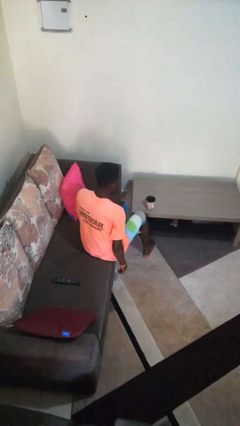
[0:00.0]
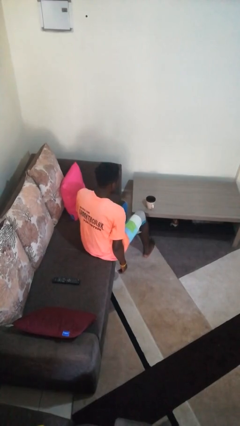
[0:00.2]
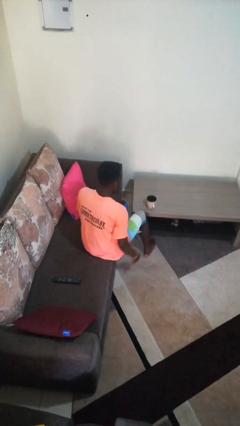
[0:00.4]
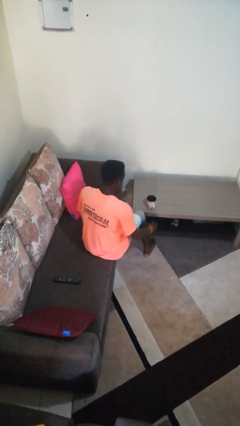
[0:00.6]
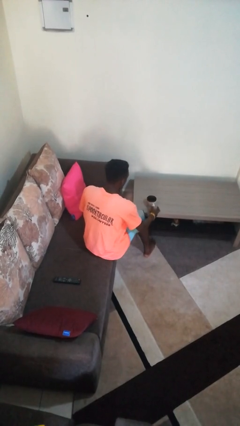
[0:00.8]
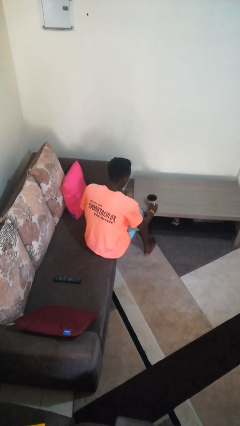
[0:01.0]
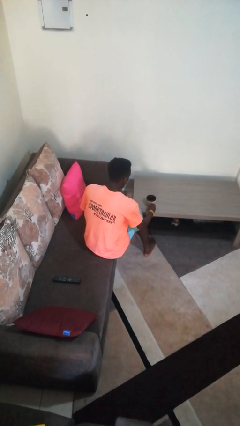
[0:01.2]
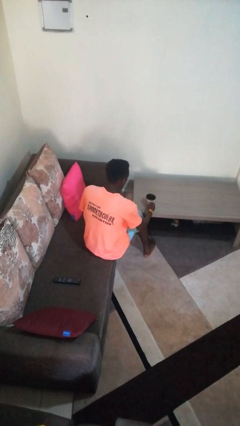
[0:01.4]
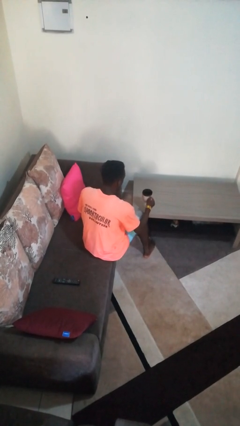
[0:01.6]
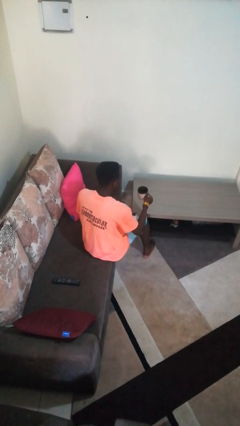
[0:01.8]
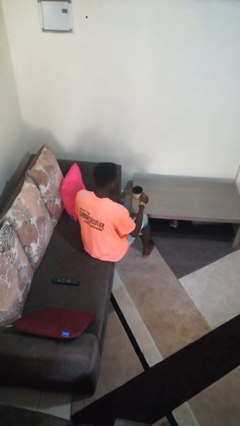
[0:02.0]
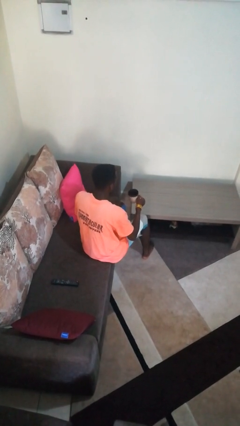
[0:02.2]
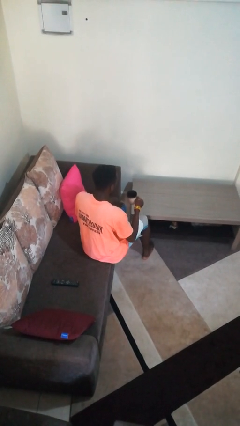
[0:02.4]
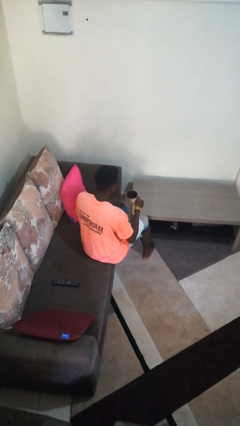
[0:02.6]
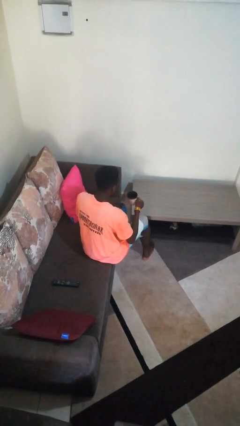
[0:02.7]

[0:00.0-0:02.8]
person picks up object from table

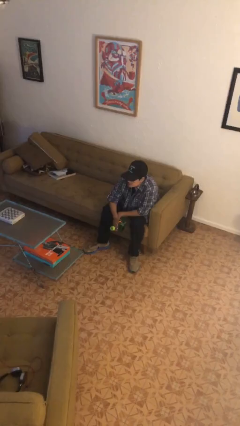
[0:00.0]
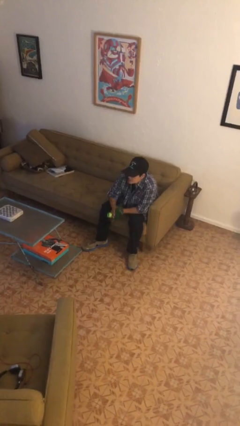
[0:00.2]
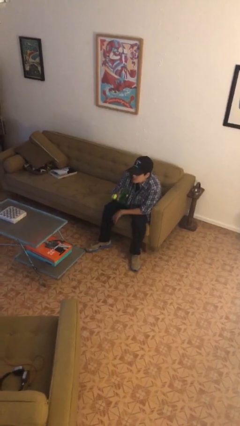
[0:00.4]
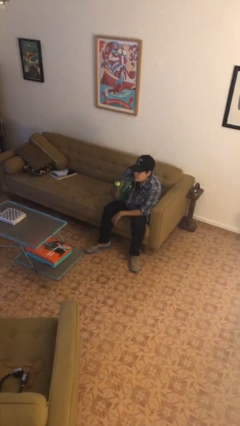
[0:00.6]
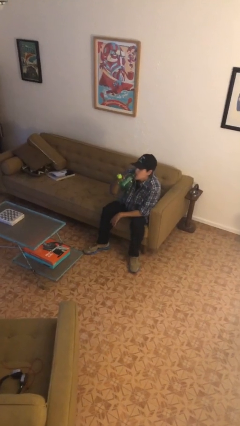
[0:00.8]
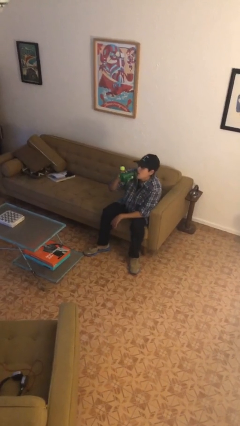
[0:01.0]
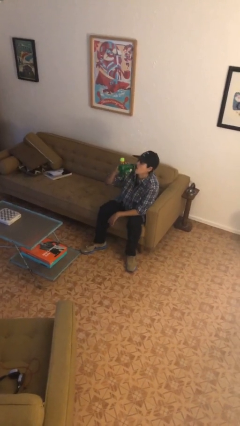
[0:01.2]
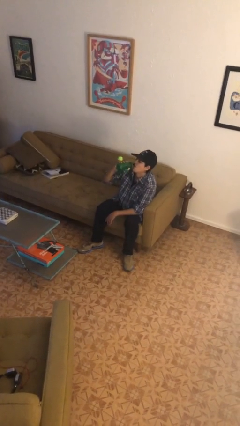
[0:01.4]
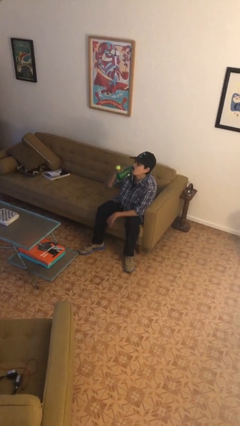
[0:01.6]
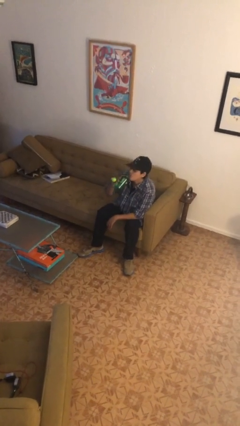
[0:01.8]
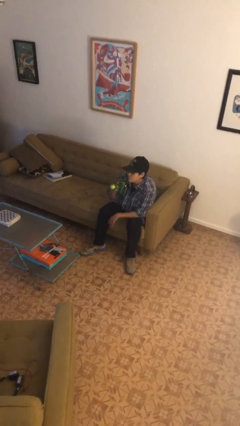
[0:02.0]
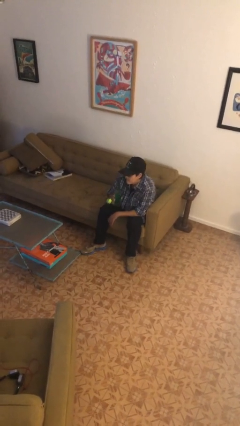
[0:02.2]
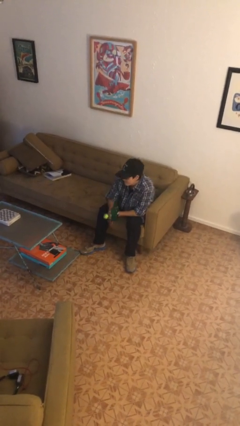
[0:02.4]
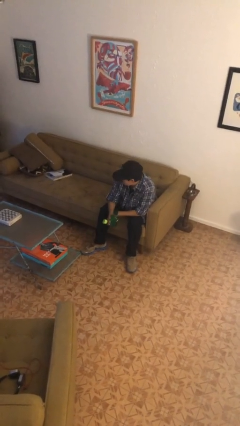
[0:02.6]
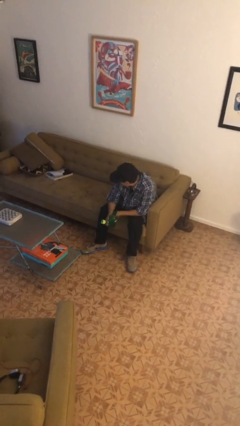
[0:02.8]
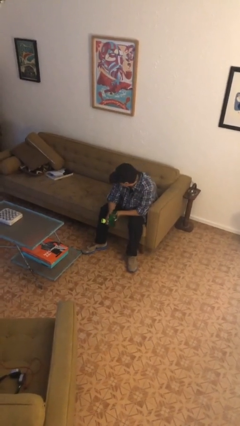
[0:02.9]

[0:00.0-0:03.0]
person drinks from bottle

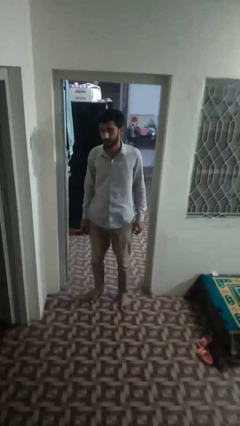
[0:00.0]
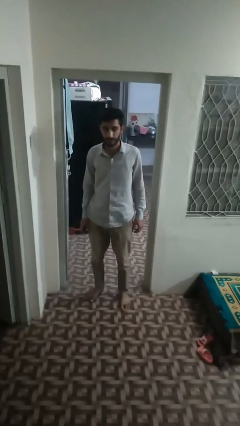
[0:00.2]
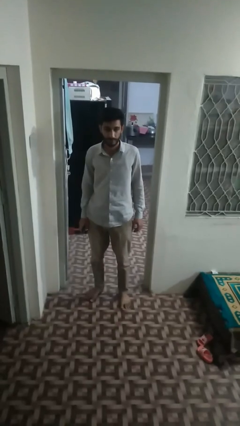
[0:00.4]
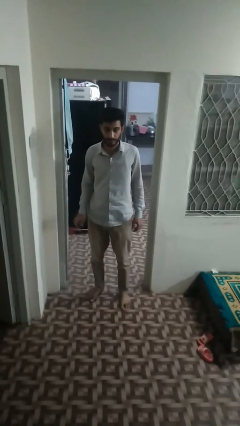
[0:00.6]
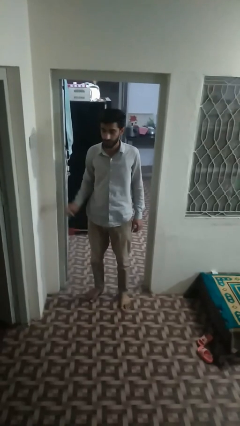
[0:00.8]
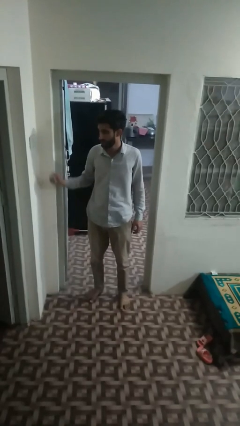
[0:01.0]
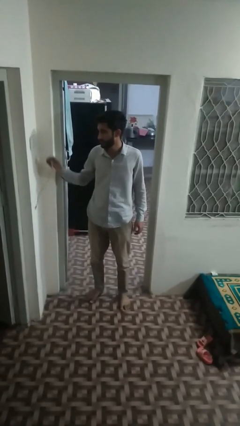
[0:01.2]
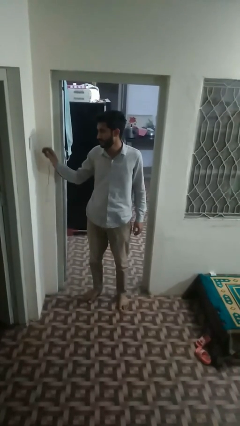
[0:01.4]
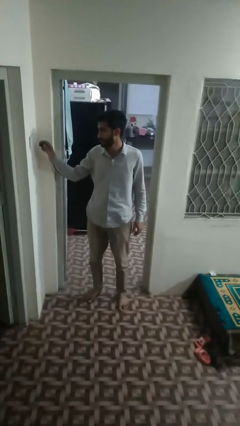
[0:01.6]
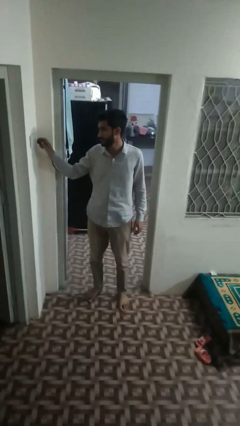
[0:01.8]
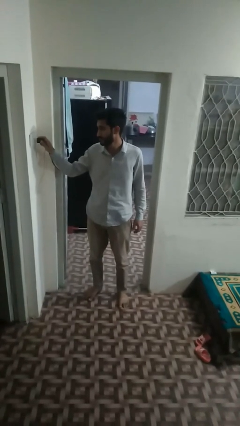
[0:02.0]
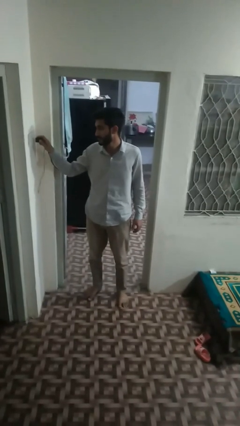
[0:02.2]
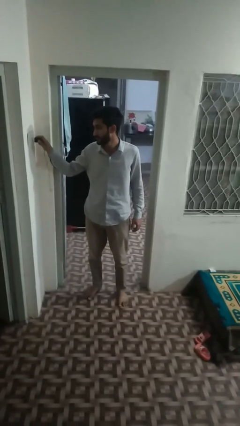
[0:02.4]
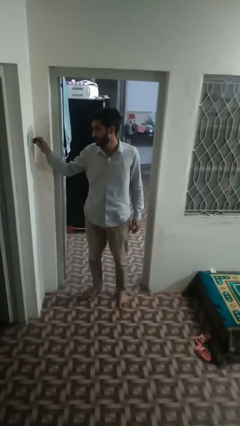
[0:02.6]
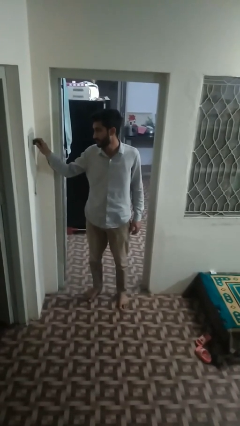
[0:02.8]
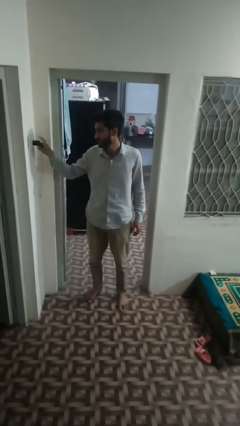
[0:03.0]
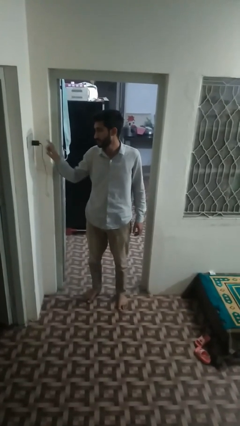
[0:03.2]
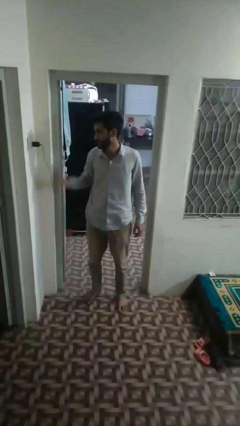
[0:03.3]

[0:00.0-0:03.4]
person plugs into electrical socket

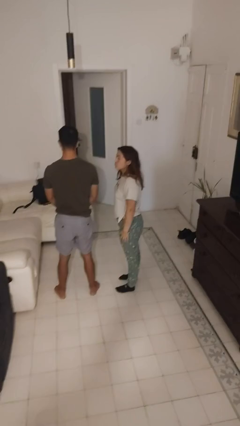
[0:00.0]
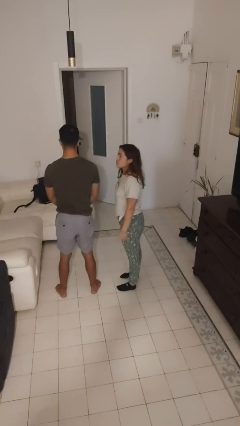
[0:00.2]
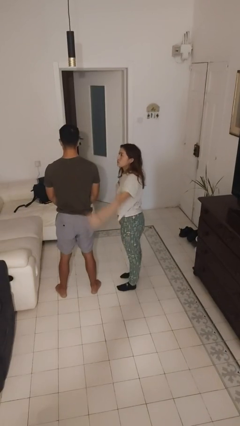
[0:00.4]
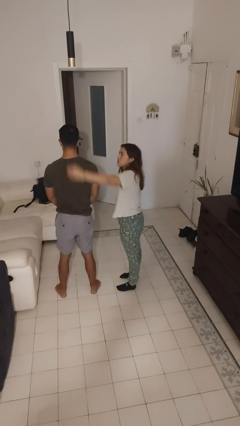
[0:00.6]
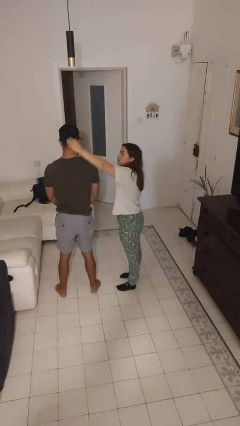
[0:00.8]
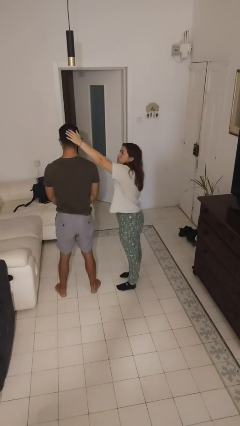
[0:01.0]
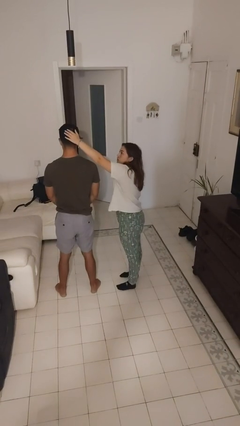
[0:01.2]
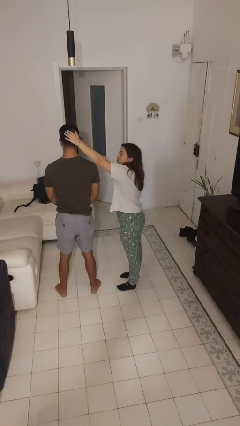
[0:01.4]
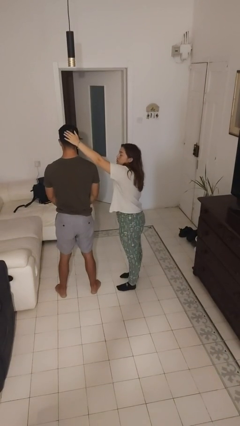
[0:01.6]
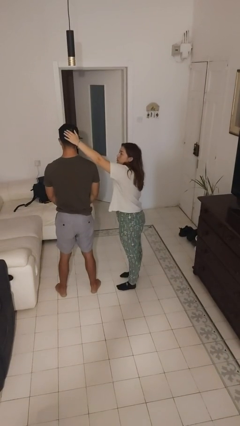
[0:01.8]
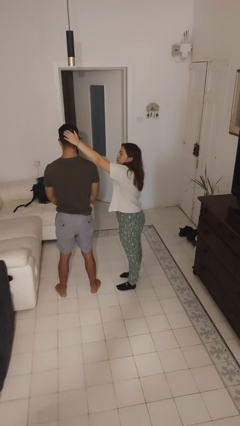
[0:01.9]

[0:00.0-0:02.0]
person grabs person by hair

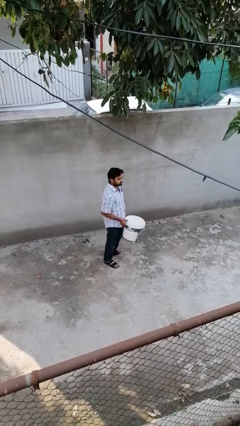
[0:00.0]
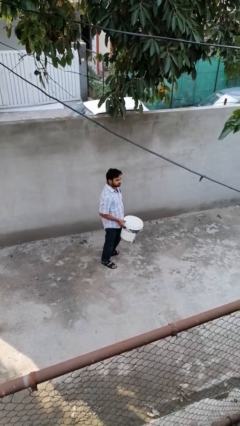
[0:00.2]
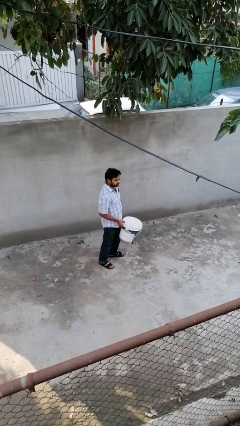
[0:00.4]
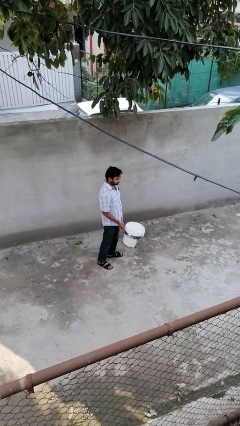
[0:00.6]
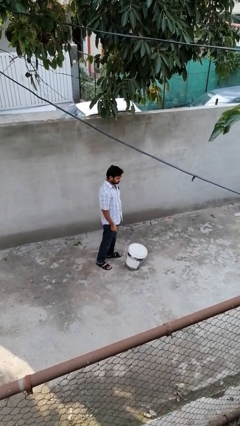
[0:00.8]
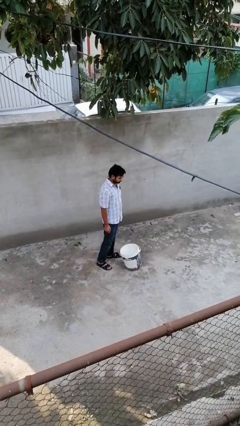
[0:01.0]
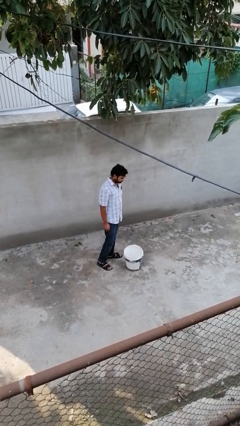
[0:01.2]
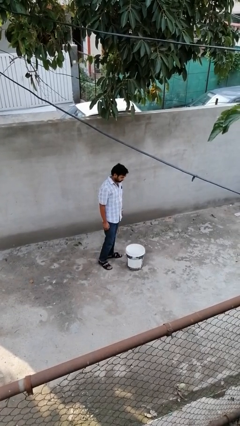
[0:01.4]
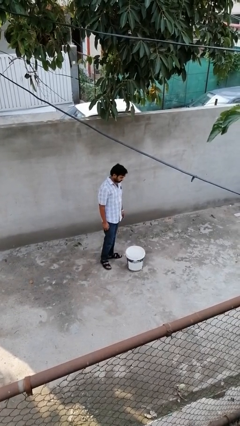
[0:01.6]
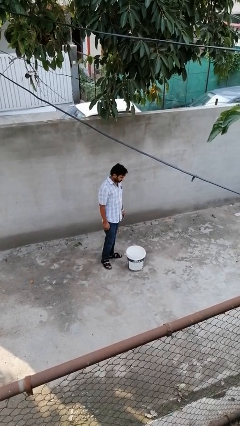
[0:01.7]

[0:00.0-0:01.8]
person drops object

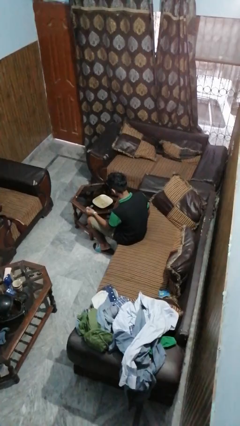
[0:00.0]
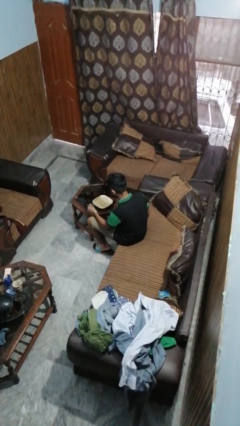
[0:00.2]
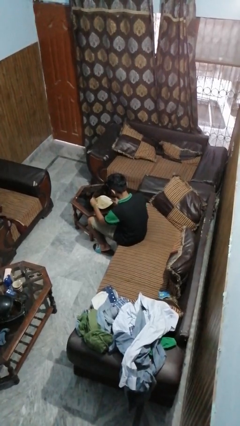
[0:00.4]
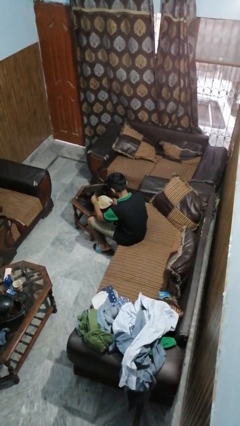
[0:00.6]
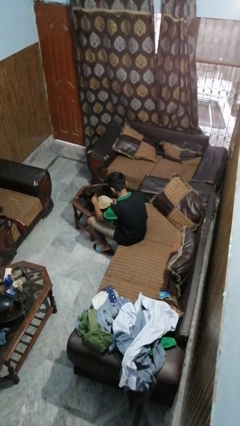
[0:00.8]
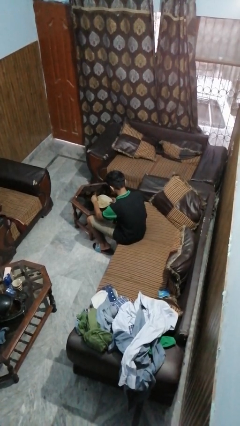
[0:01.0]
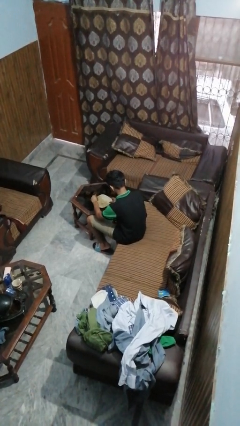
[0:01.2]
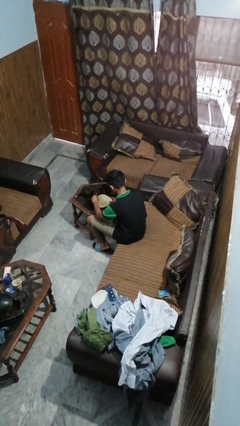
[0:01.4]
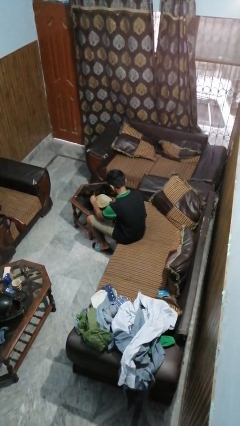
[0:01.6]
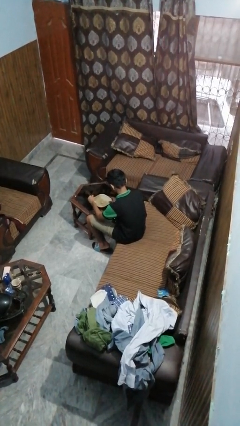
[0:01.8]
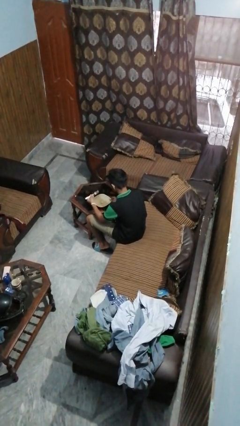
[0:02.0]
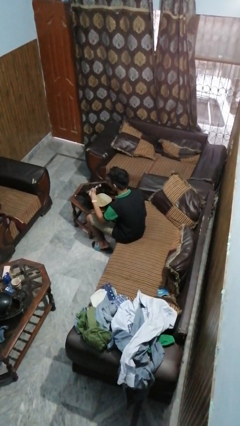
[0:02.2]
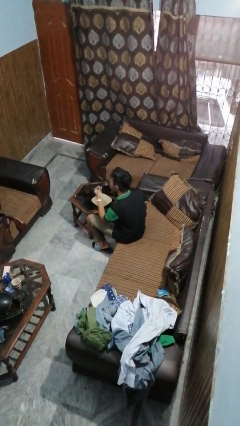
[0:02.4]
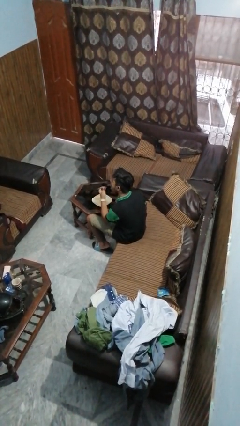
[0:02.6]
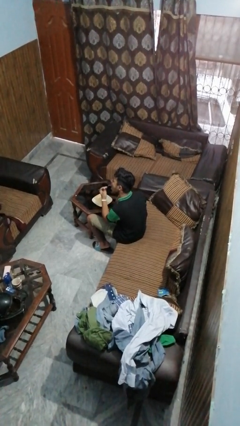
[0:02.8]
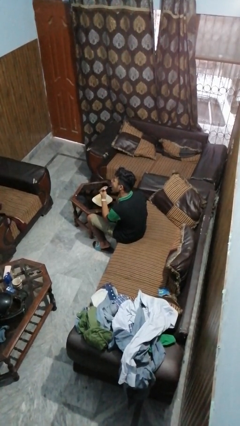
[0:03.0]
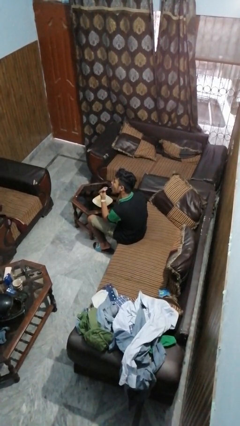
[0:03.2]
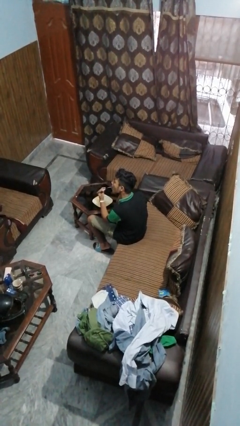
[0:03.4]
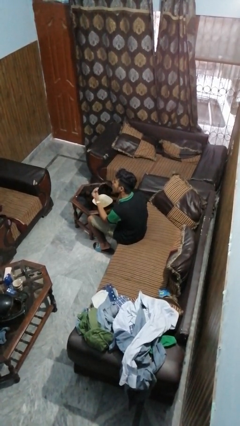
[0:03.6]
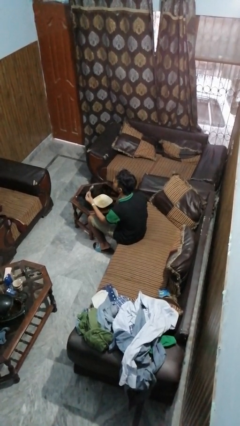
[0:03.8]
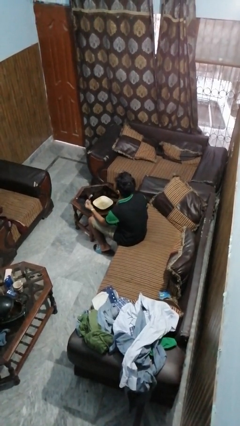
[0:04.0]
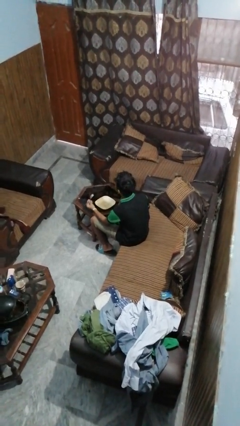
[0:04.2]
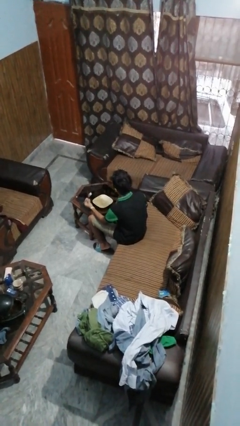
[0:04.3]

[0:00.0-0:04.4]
person eats with utensil
